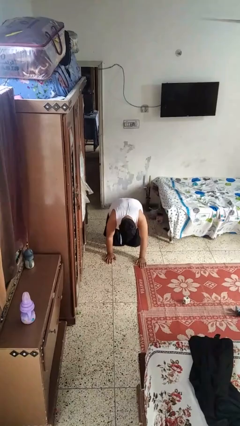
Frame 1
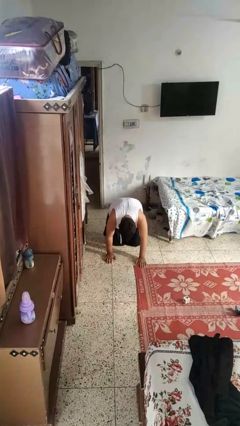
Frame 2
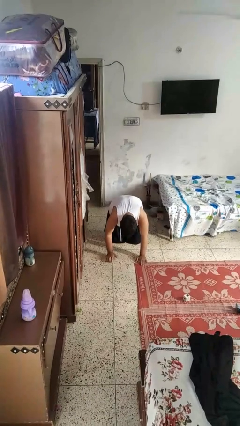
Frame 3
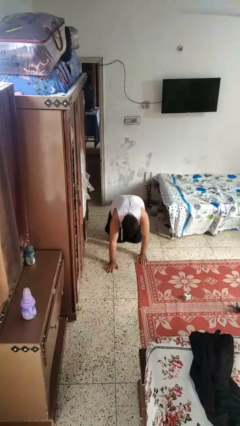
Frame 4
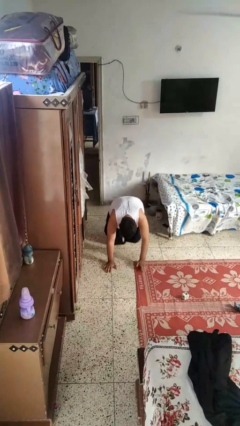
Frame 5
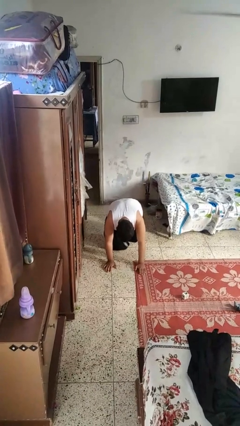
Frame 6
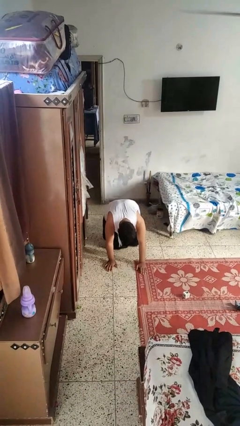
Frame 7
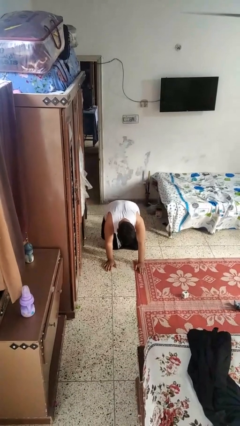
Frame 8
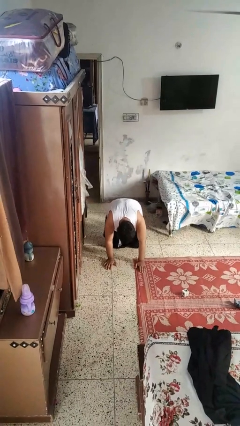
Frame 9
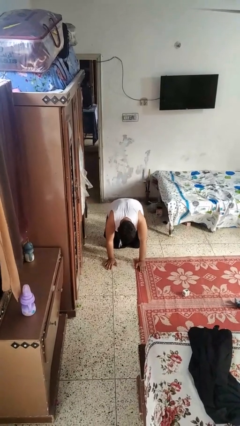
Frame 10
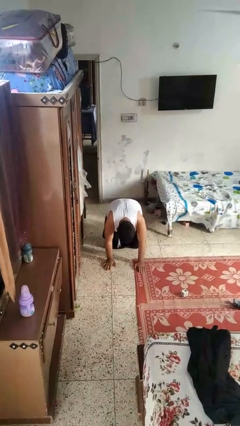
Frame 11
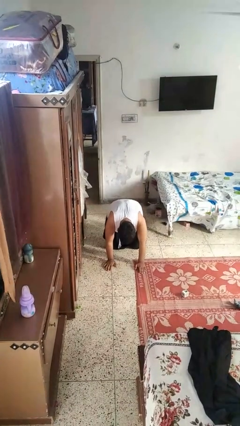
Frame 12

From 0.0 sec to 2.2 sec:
person crawls

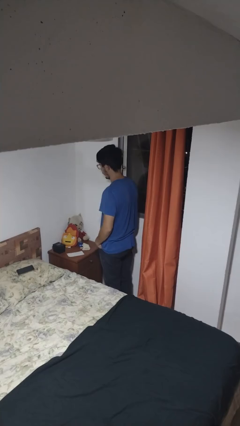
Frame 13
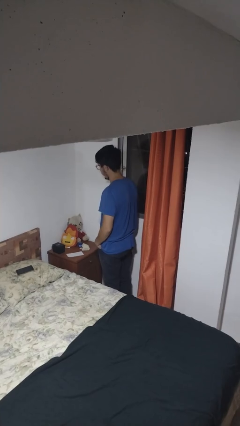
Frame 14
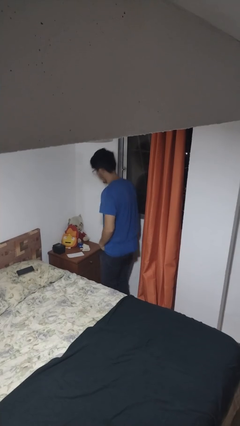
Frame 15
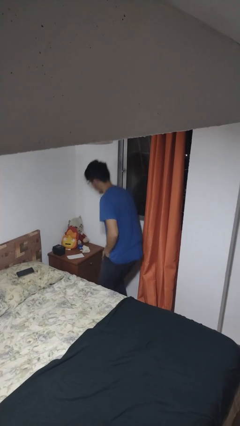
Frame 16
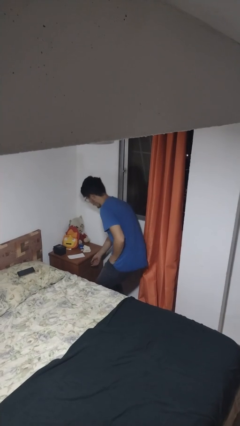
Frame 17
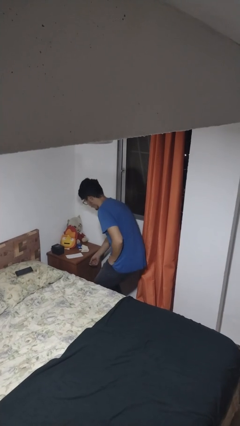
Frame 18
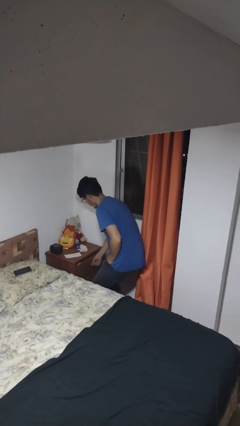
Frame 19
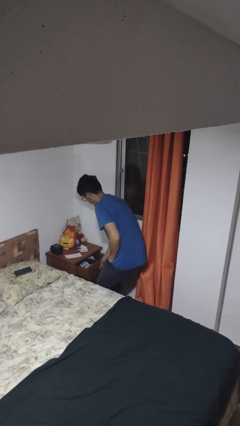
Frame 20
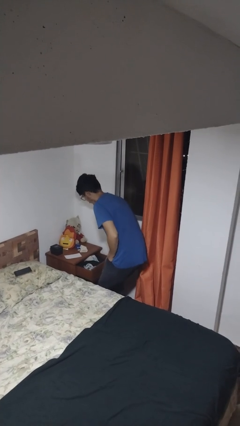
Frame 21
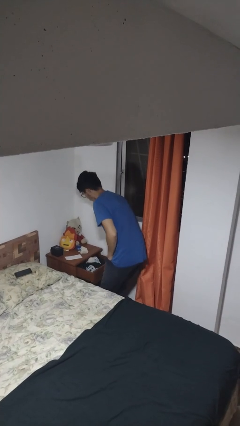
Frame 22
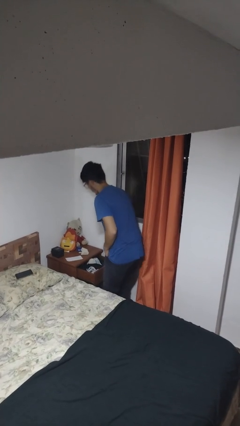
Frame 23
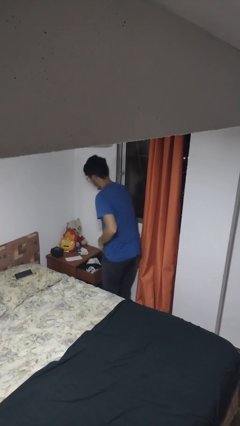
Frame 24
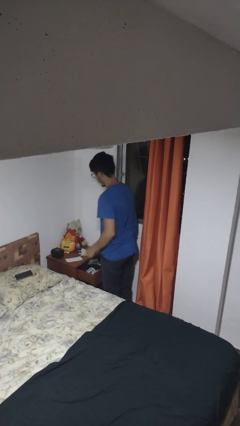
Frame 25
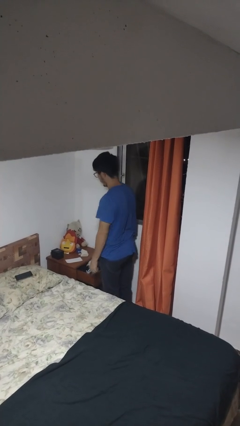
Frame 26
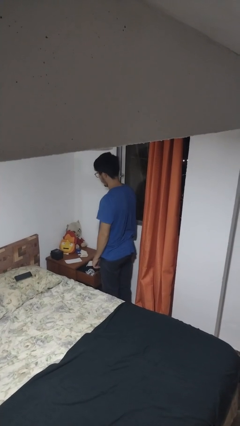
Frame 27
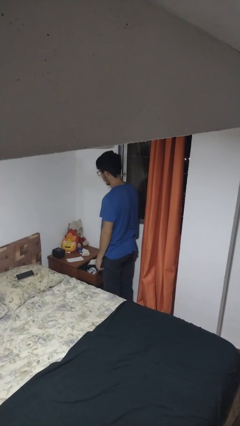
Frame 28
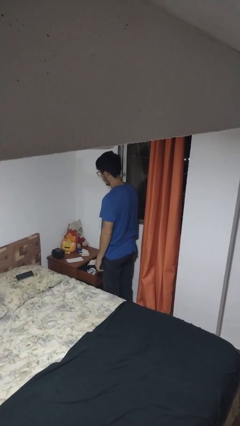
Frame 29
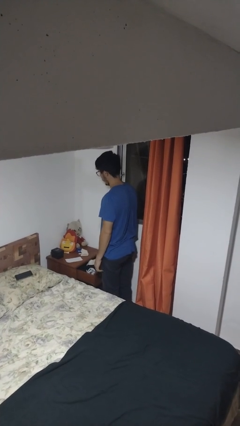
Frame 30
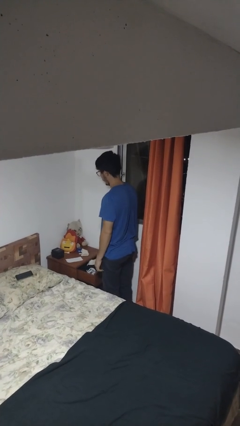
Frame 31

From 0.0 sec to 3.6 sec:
person opens dresser drawer

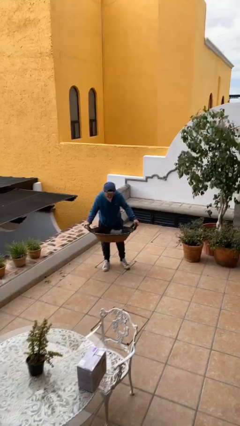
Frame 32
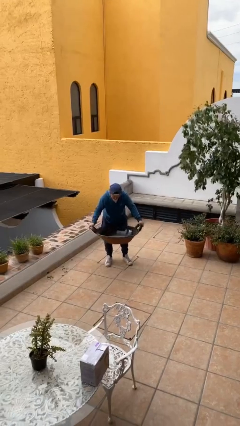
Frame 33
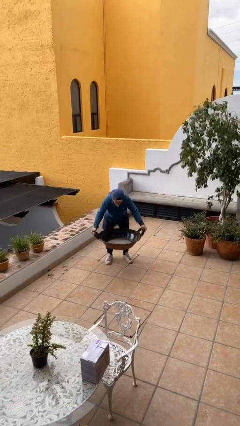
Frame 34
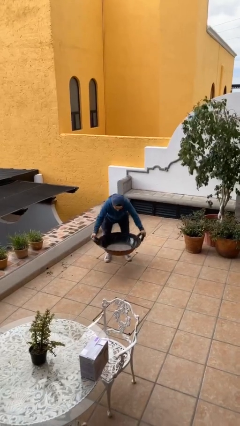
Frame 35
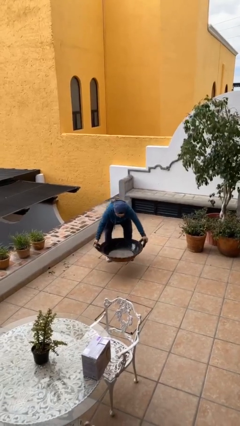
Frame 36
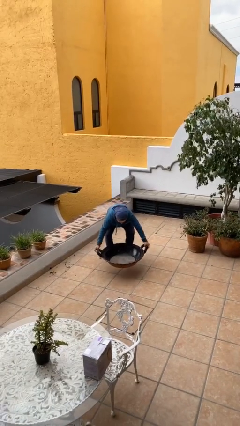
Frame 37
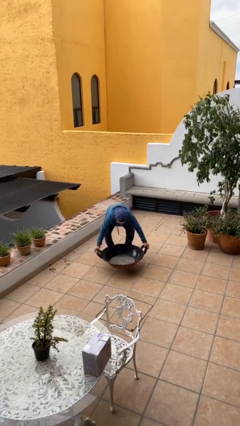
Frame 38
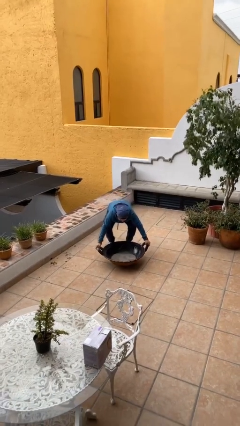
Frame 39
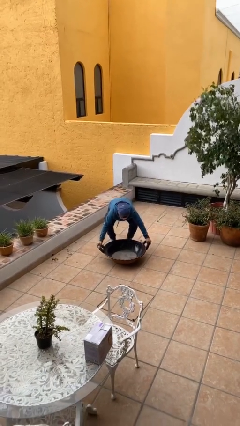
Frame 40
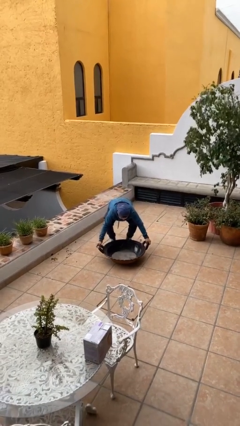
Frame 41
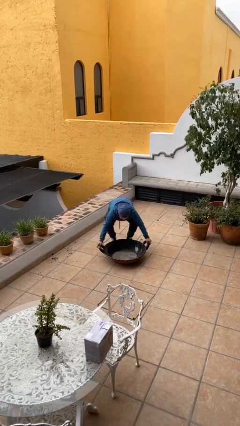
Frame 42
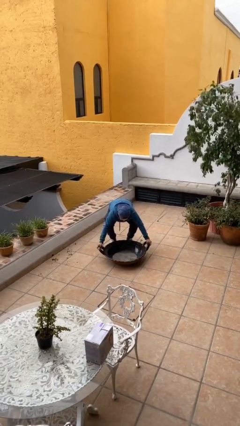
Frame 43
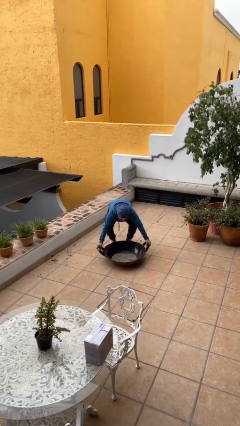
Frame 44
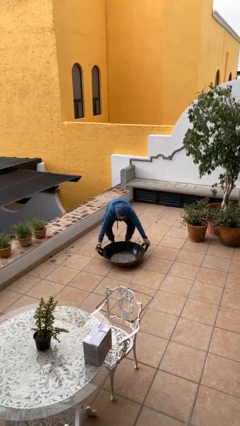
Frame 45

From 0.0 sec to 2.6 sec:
person puts down object on floor

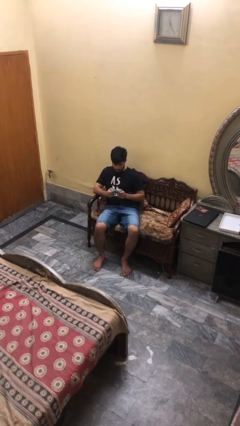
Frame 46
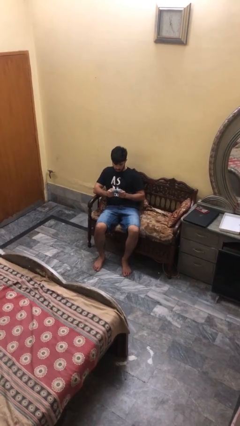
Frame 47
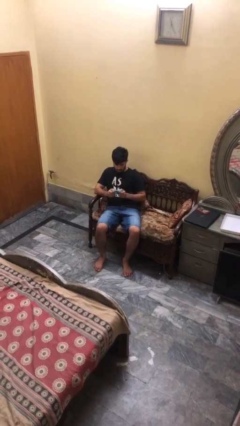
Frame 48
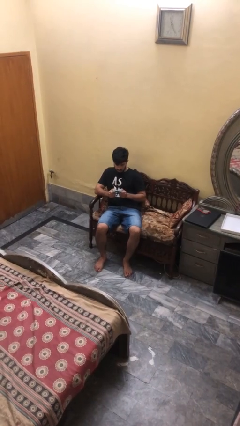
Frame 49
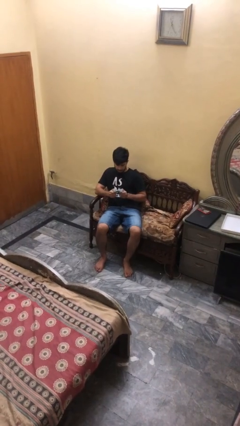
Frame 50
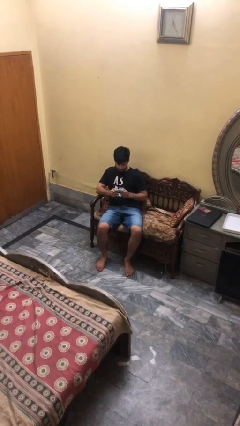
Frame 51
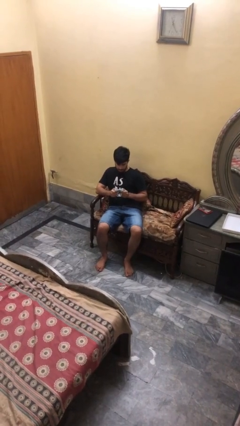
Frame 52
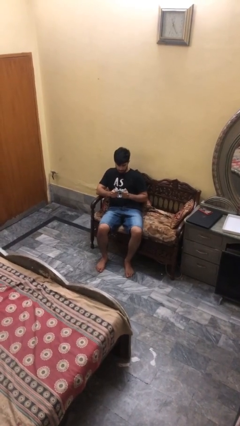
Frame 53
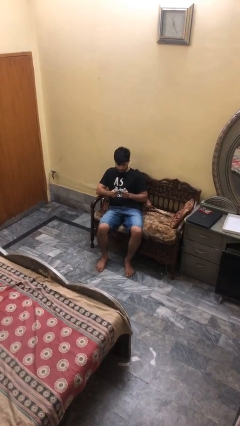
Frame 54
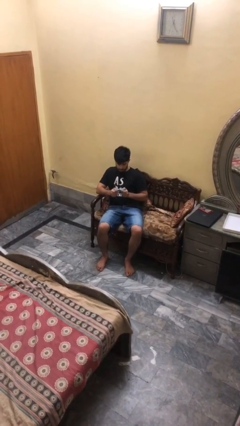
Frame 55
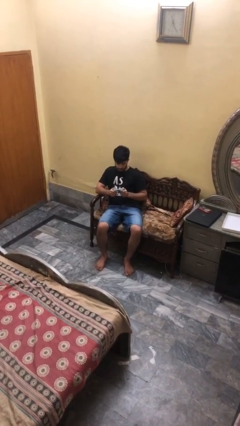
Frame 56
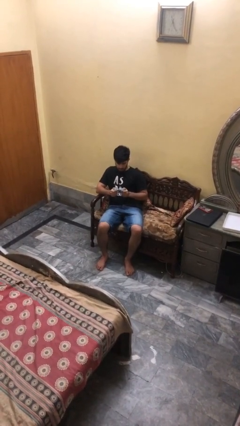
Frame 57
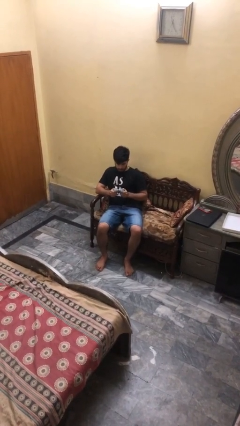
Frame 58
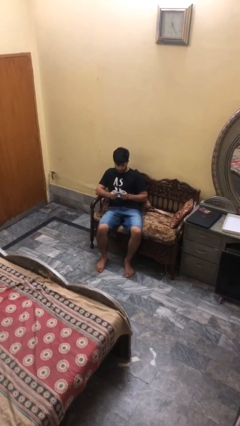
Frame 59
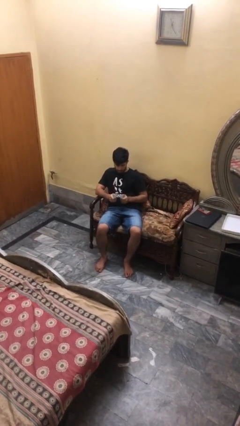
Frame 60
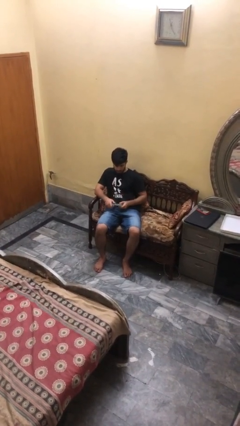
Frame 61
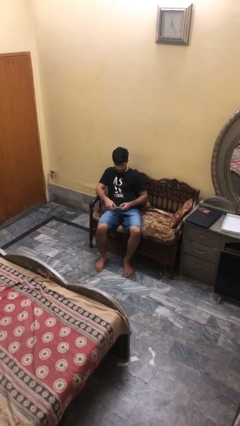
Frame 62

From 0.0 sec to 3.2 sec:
person interacts with handheld game

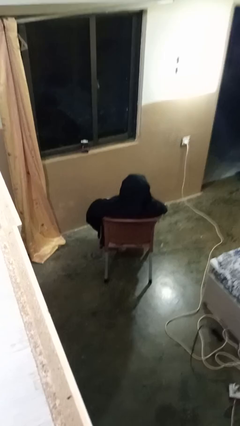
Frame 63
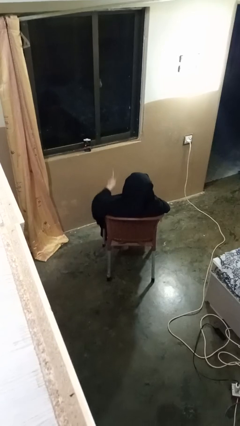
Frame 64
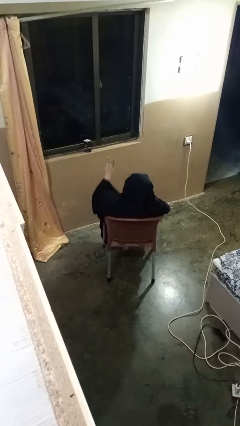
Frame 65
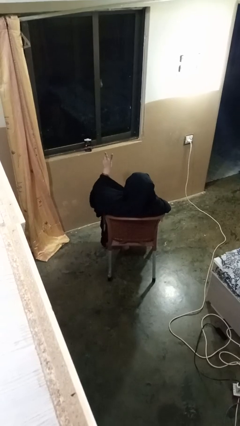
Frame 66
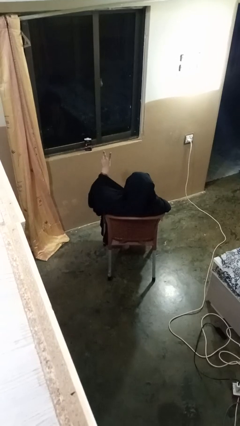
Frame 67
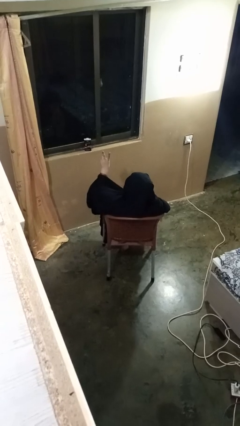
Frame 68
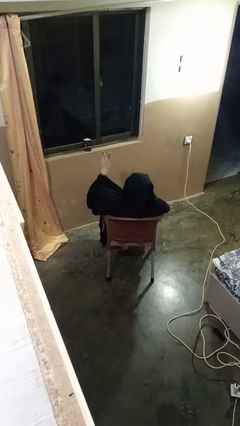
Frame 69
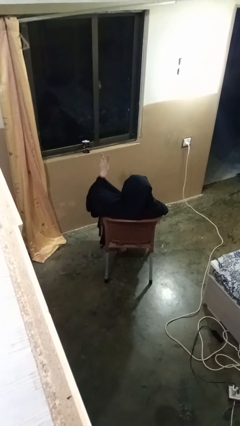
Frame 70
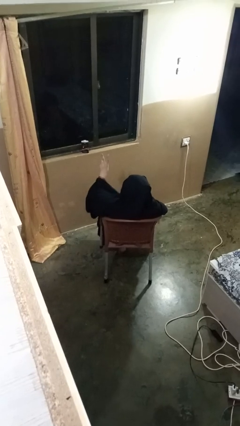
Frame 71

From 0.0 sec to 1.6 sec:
person gestures peace

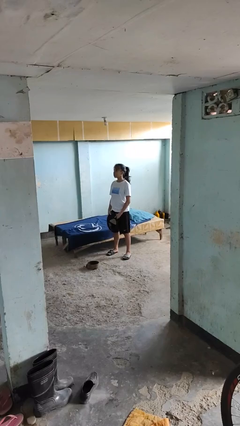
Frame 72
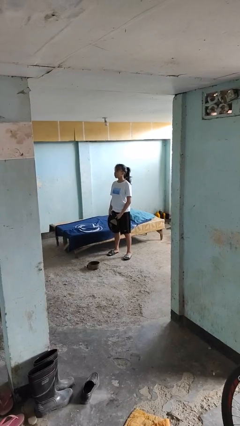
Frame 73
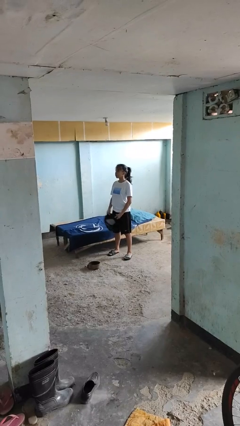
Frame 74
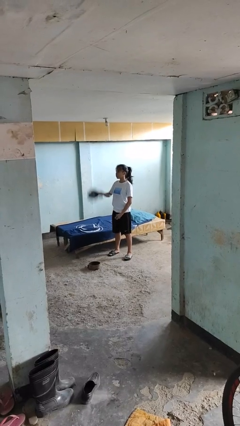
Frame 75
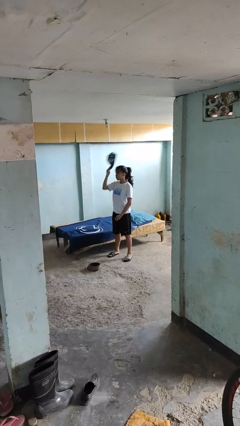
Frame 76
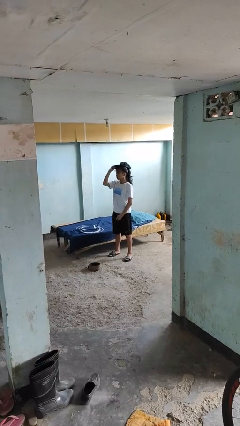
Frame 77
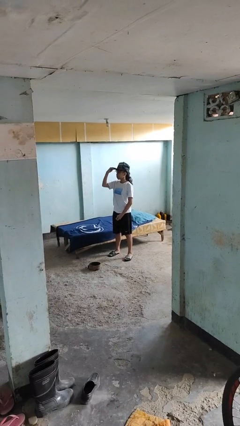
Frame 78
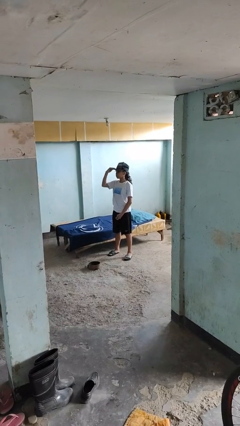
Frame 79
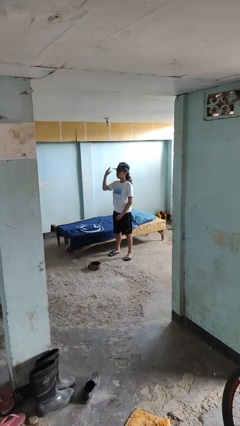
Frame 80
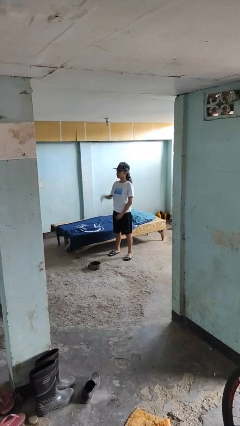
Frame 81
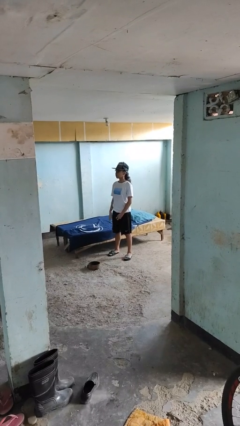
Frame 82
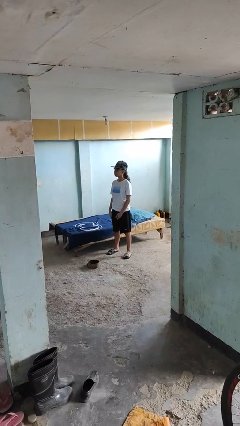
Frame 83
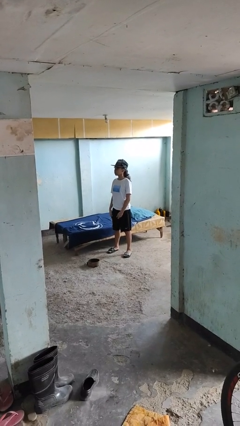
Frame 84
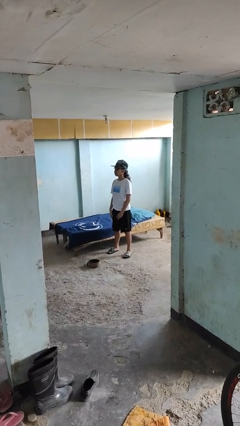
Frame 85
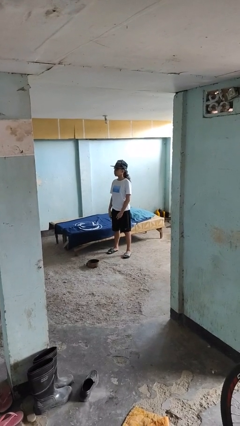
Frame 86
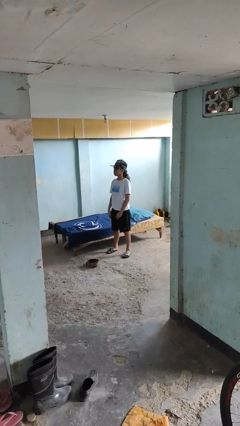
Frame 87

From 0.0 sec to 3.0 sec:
person puts on hat

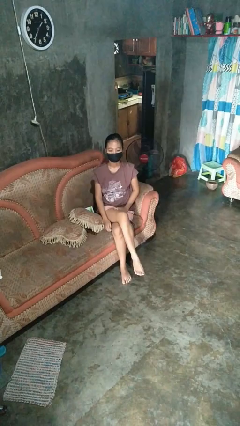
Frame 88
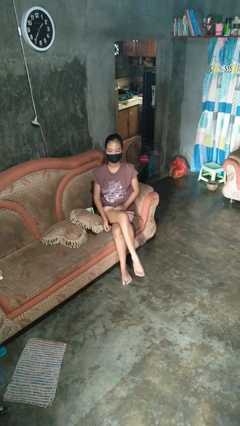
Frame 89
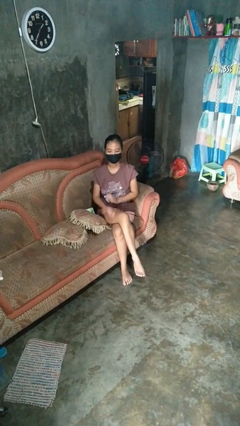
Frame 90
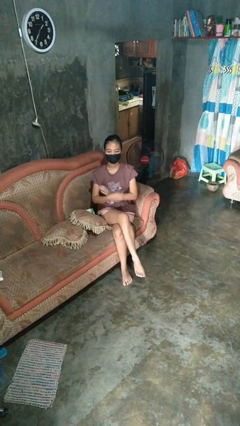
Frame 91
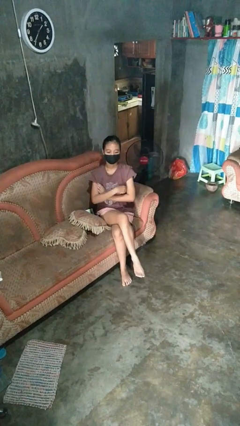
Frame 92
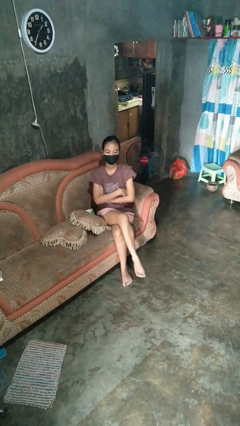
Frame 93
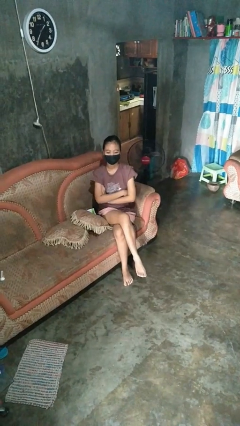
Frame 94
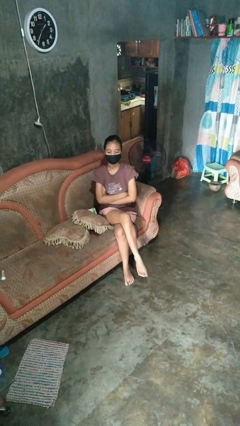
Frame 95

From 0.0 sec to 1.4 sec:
person crosses arms
